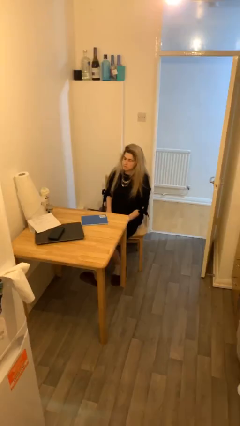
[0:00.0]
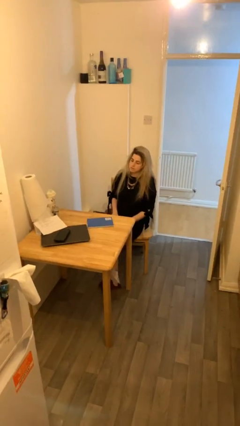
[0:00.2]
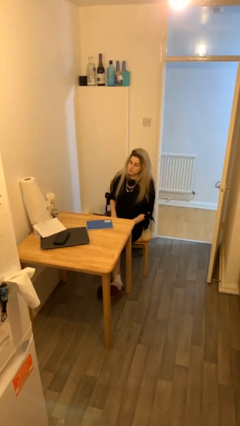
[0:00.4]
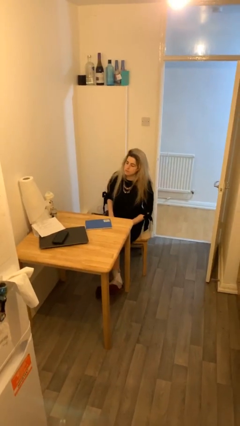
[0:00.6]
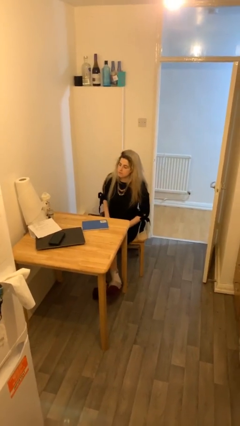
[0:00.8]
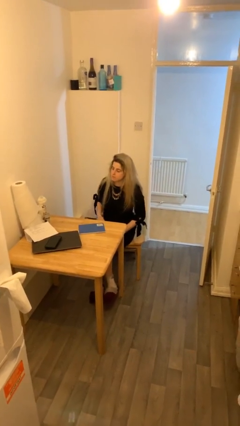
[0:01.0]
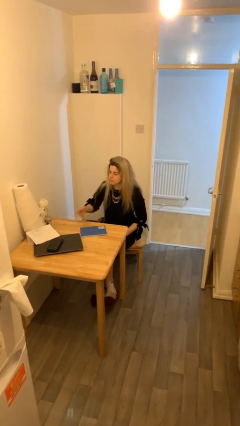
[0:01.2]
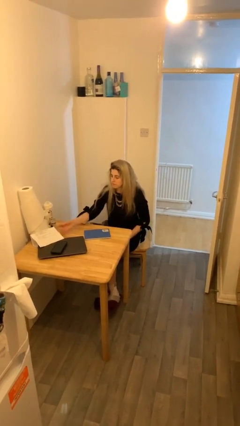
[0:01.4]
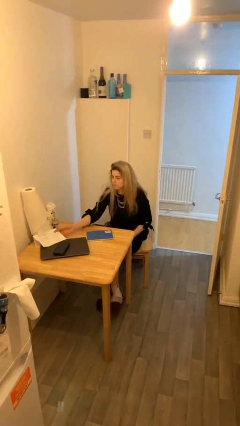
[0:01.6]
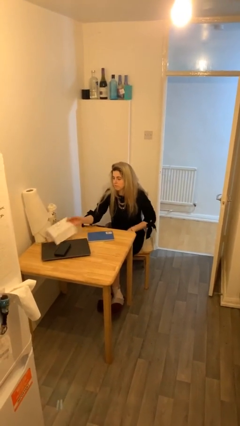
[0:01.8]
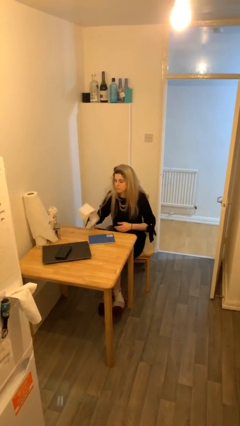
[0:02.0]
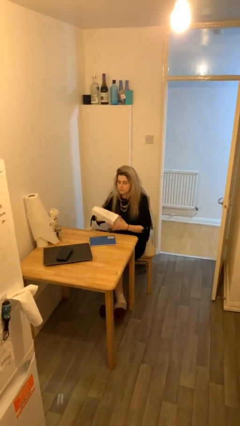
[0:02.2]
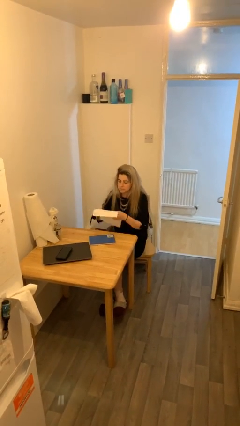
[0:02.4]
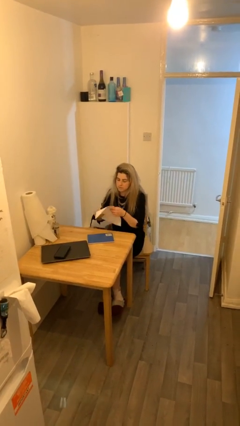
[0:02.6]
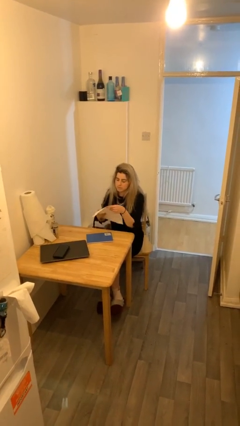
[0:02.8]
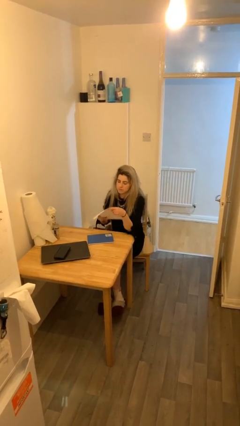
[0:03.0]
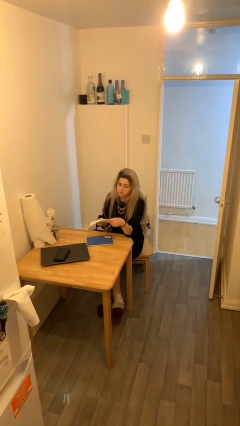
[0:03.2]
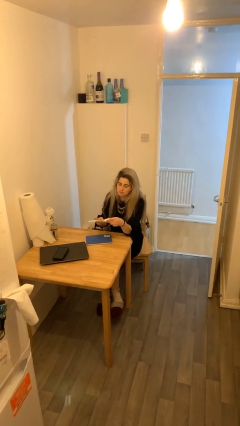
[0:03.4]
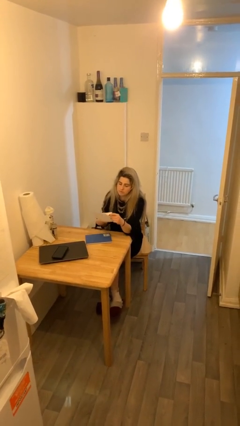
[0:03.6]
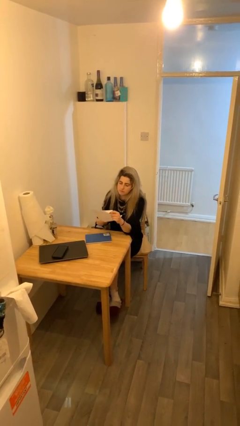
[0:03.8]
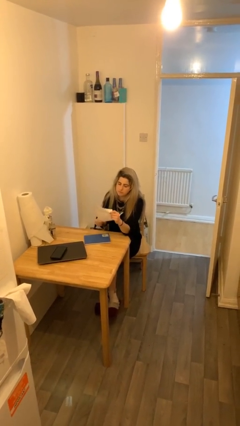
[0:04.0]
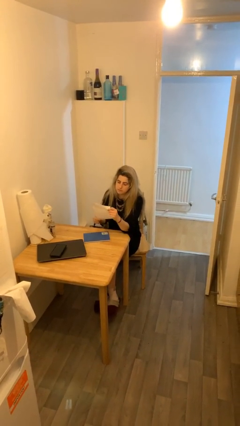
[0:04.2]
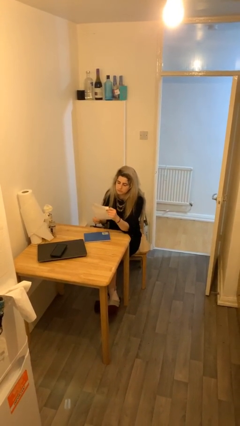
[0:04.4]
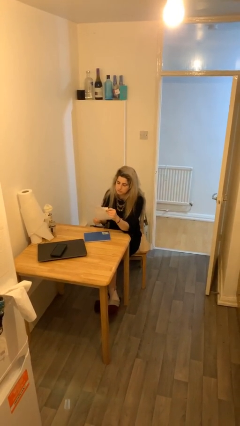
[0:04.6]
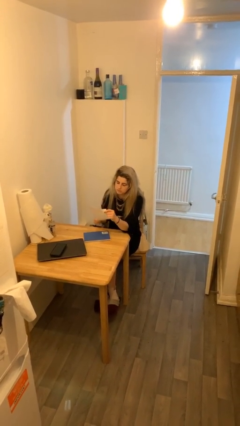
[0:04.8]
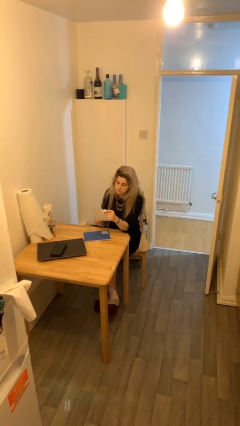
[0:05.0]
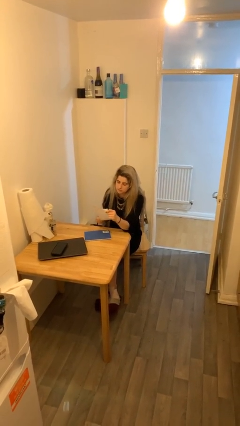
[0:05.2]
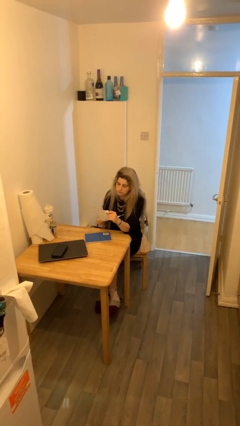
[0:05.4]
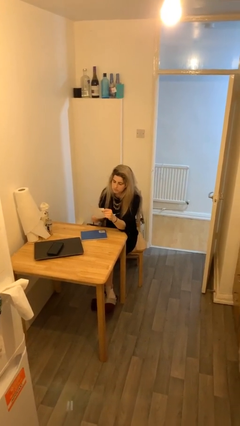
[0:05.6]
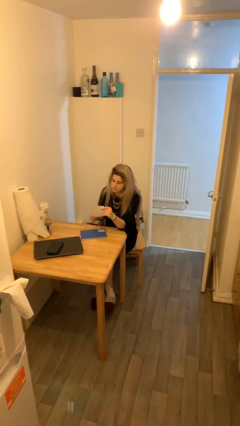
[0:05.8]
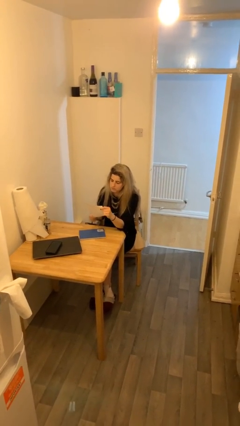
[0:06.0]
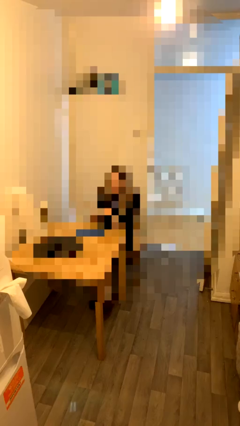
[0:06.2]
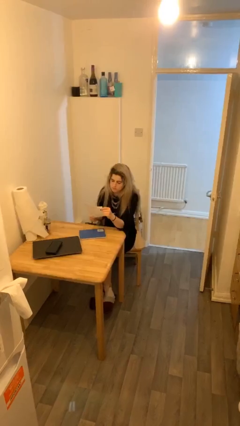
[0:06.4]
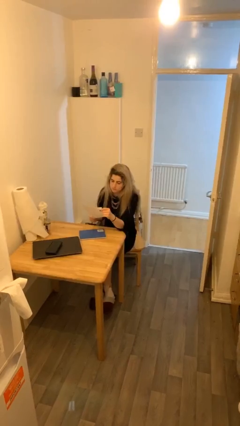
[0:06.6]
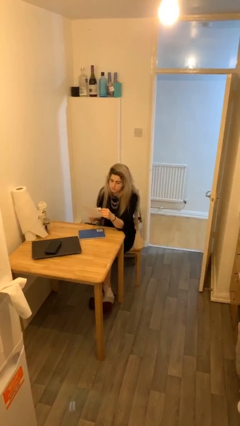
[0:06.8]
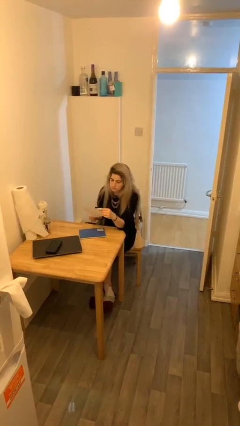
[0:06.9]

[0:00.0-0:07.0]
person reads document

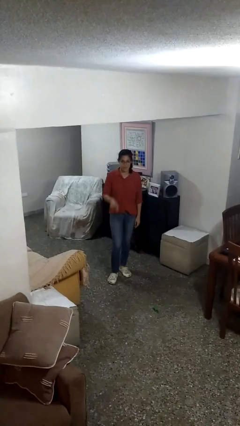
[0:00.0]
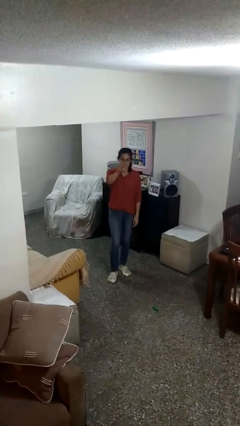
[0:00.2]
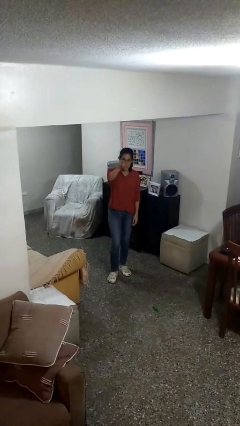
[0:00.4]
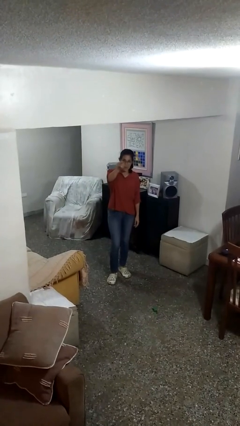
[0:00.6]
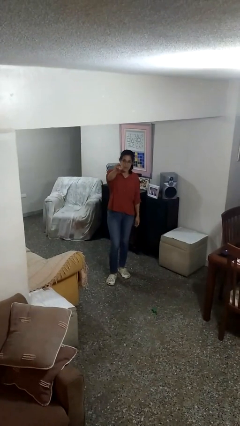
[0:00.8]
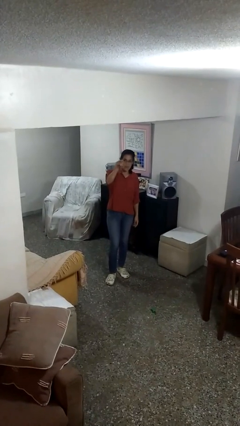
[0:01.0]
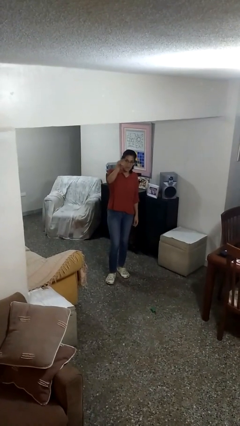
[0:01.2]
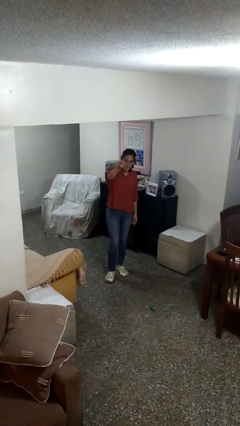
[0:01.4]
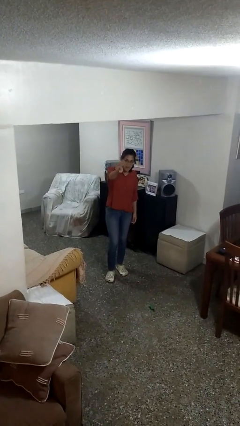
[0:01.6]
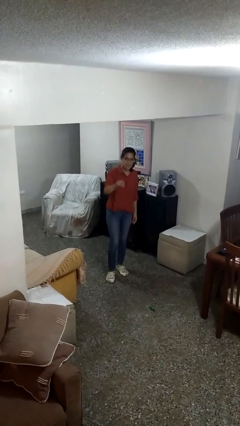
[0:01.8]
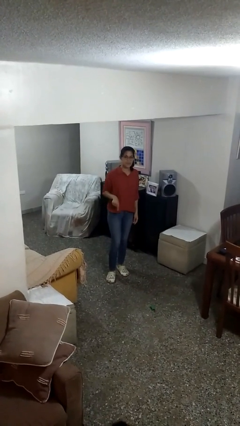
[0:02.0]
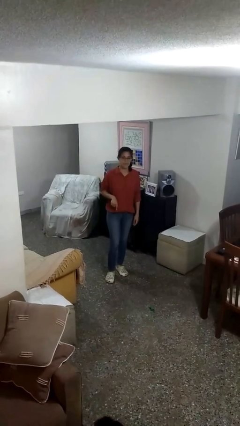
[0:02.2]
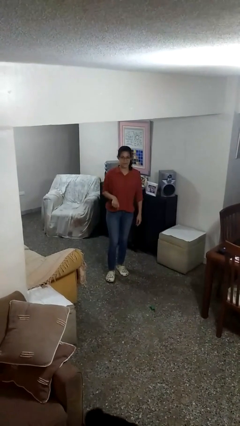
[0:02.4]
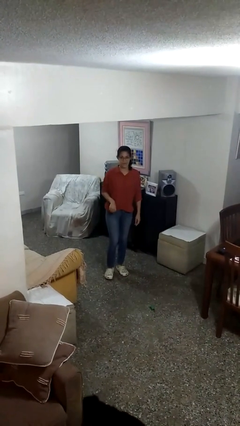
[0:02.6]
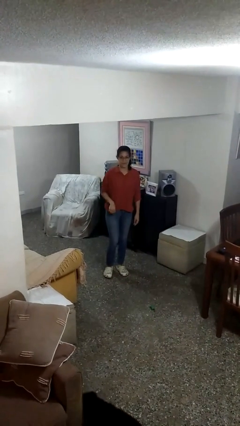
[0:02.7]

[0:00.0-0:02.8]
person points at person

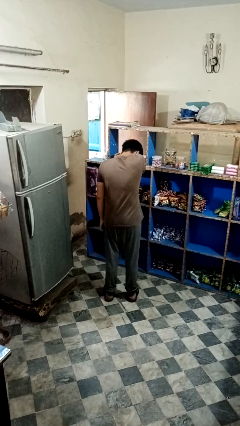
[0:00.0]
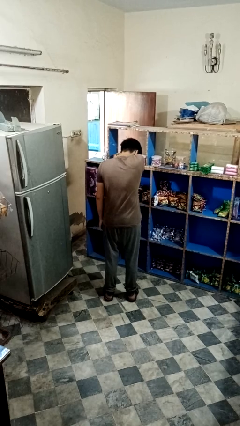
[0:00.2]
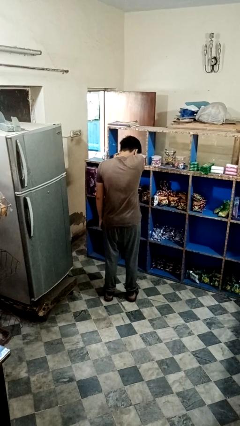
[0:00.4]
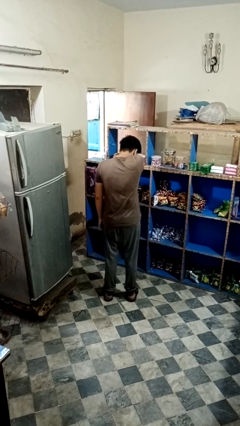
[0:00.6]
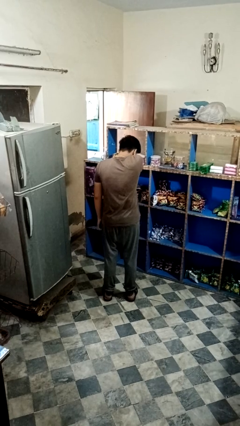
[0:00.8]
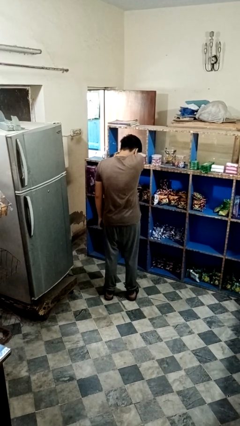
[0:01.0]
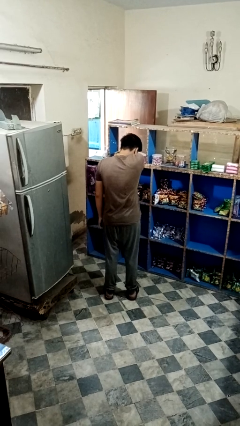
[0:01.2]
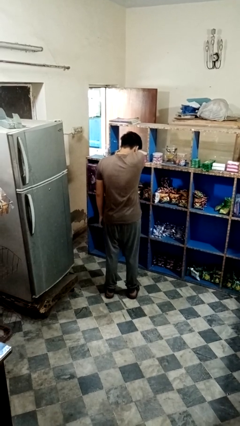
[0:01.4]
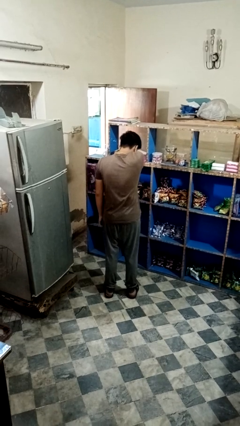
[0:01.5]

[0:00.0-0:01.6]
person sneezes into arm

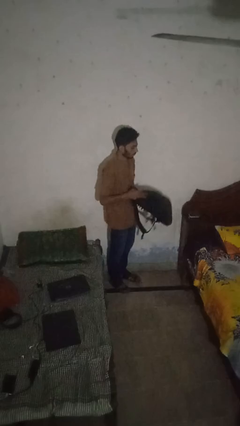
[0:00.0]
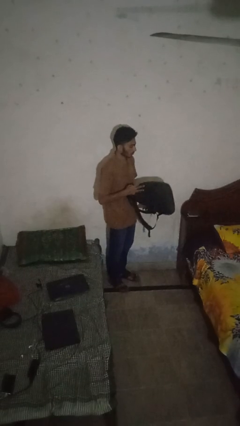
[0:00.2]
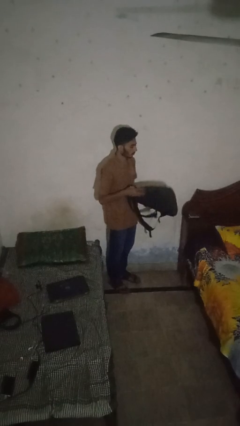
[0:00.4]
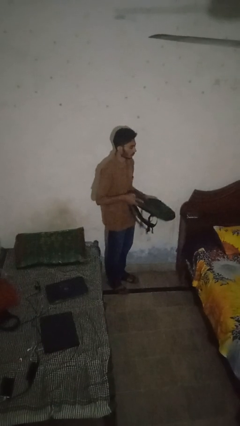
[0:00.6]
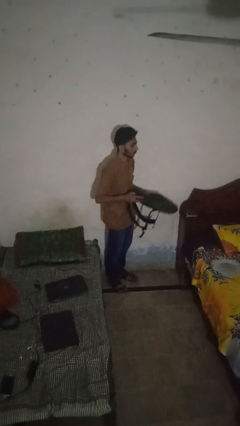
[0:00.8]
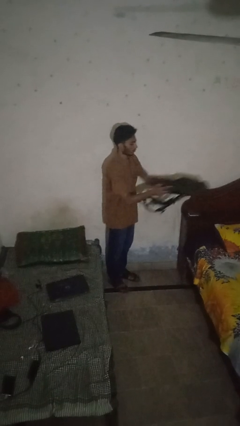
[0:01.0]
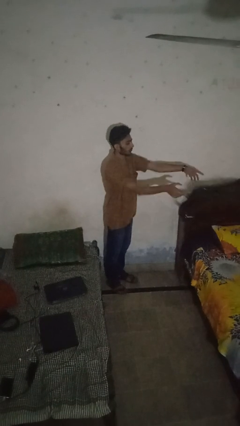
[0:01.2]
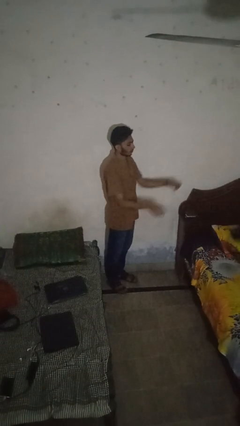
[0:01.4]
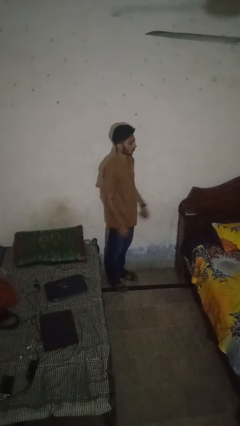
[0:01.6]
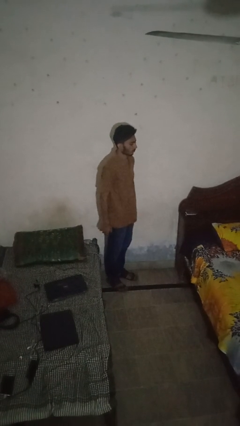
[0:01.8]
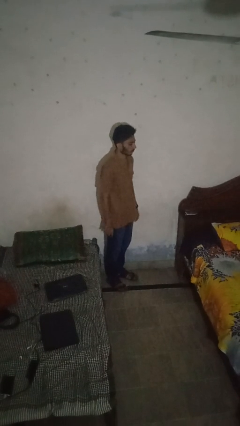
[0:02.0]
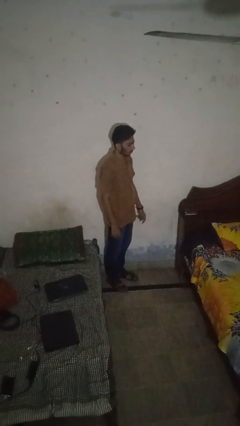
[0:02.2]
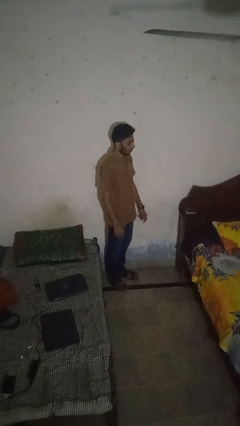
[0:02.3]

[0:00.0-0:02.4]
person throws object on bed

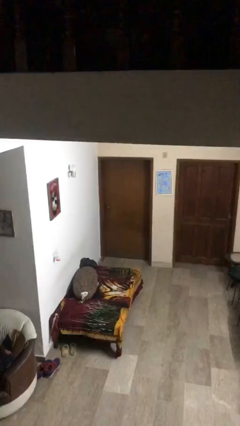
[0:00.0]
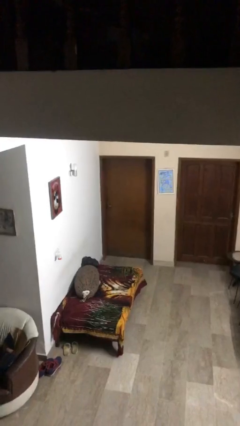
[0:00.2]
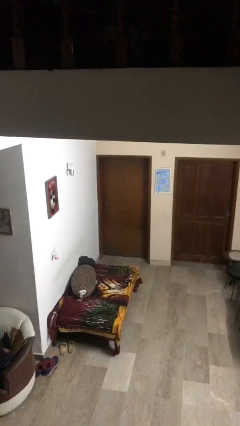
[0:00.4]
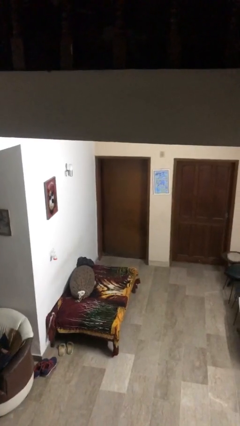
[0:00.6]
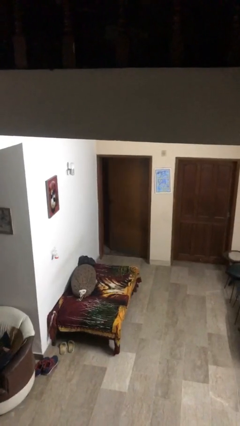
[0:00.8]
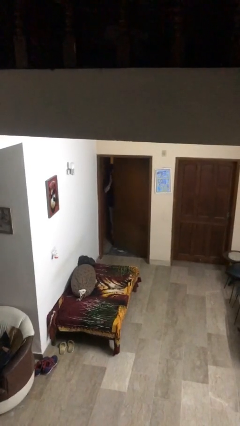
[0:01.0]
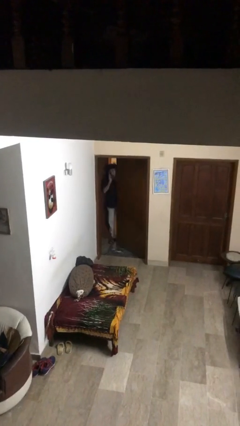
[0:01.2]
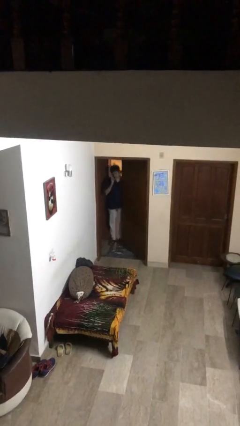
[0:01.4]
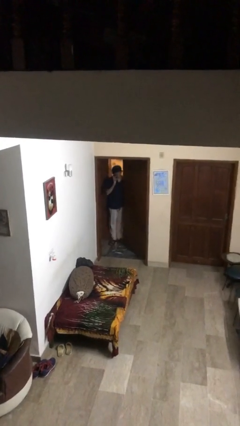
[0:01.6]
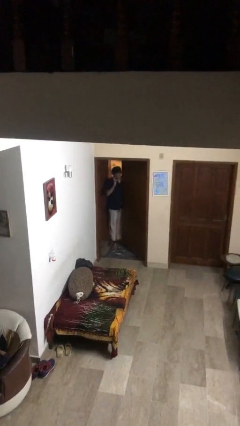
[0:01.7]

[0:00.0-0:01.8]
person opens facility door

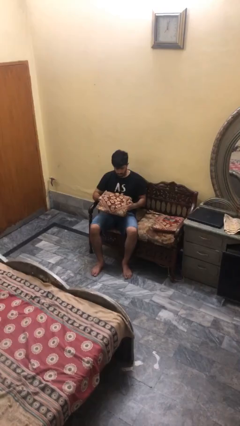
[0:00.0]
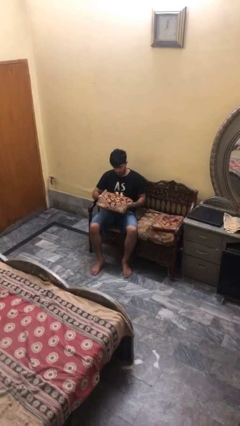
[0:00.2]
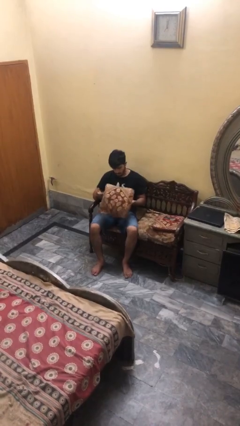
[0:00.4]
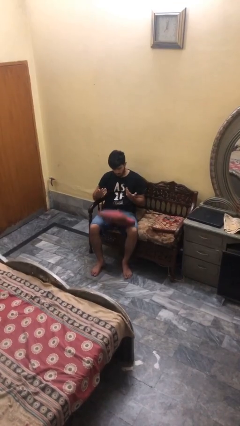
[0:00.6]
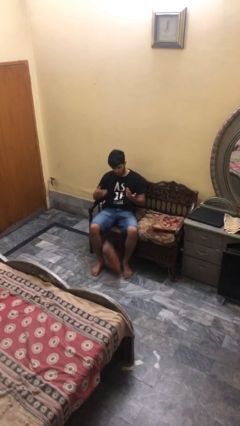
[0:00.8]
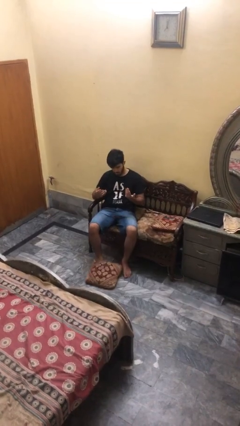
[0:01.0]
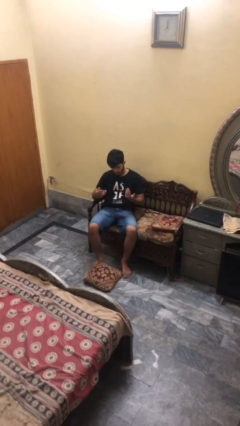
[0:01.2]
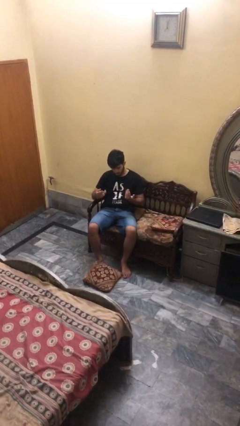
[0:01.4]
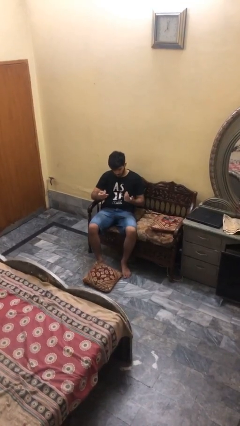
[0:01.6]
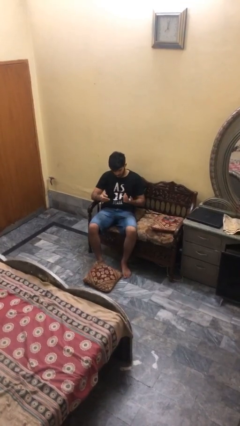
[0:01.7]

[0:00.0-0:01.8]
person drops object
